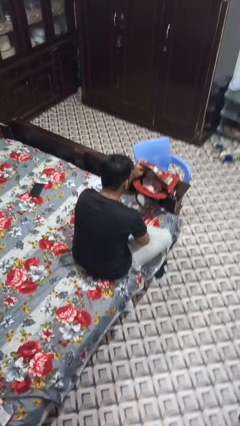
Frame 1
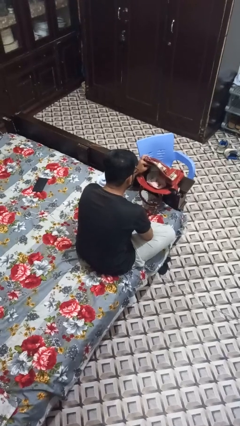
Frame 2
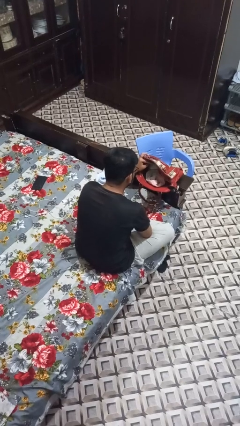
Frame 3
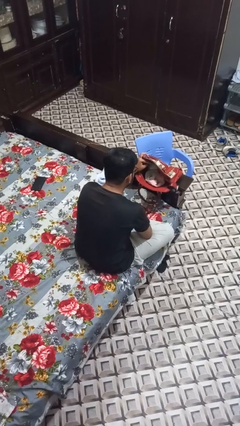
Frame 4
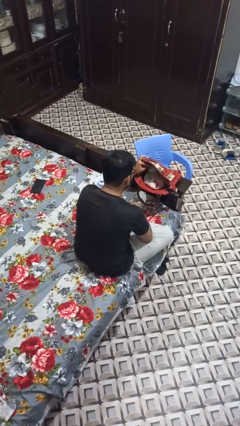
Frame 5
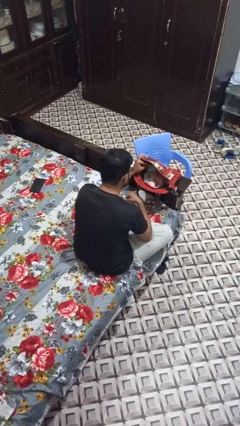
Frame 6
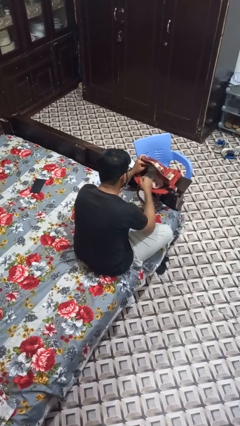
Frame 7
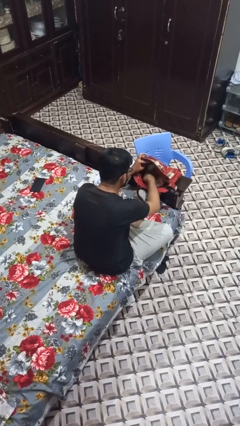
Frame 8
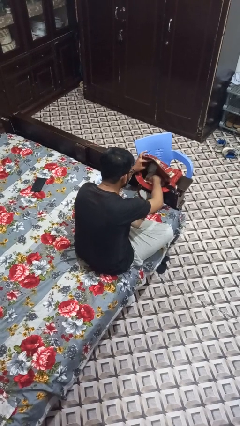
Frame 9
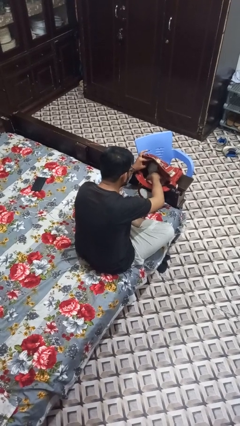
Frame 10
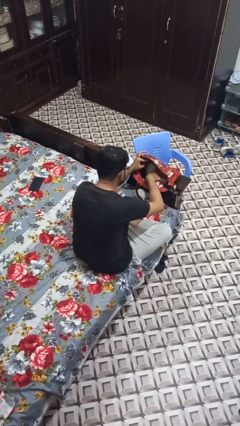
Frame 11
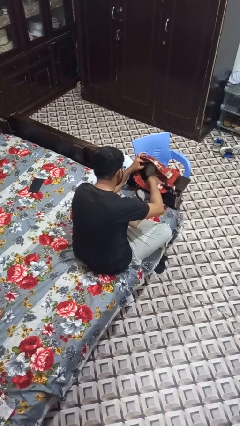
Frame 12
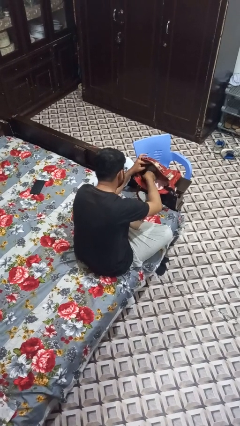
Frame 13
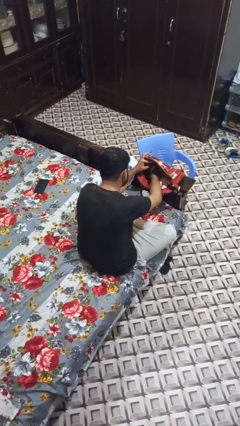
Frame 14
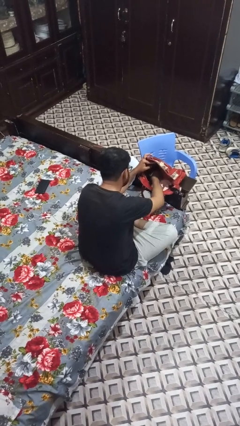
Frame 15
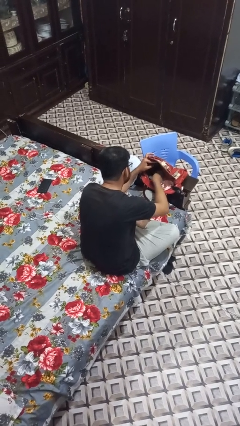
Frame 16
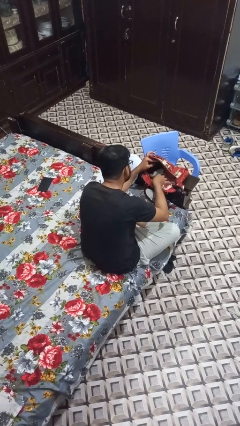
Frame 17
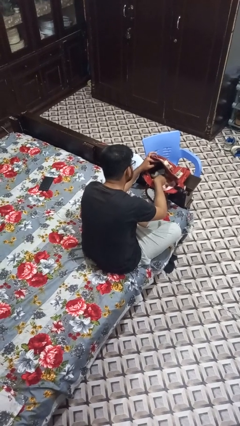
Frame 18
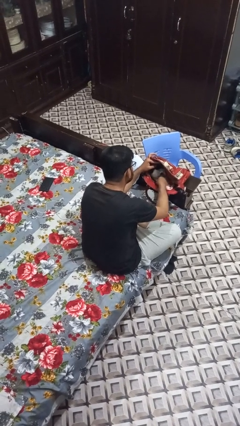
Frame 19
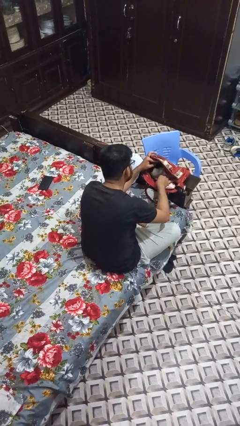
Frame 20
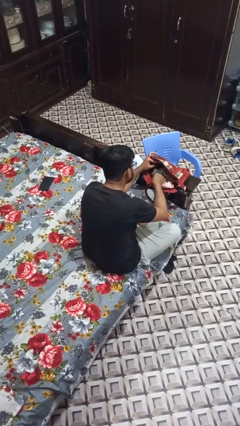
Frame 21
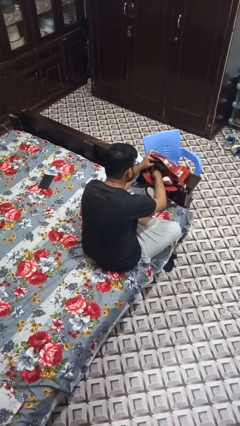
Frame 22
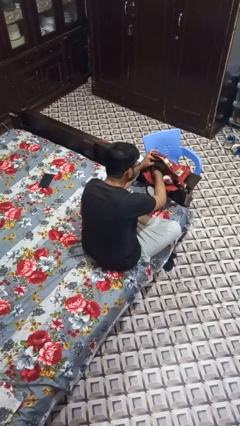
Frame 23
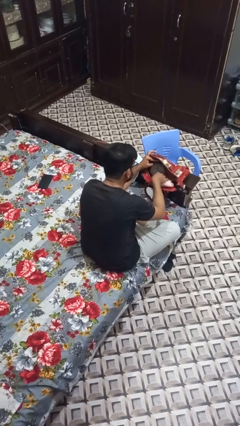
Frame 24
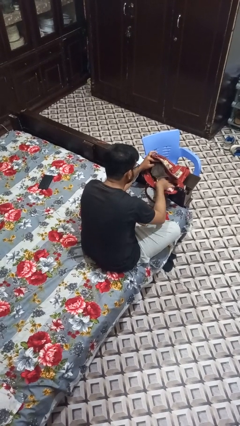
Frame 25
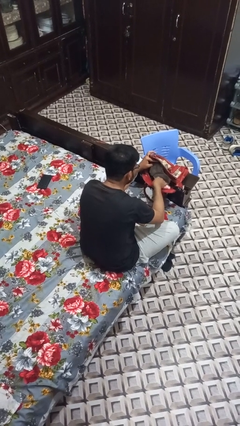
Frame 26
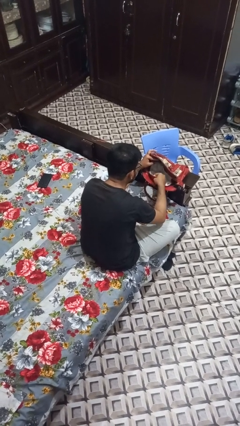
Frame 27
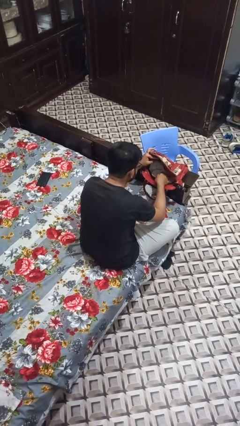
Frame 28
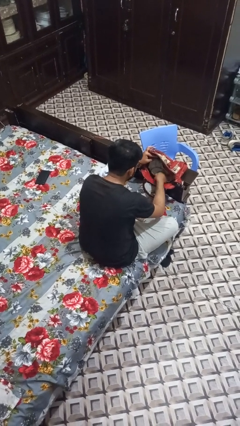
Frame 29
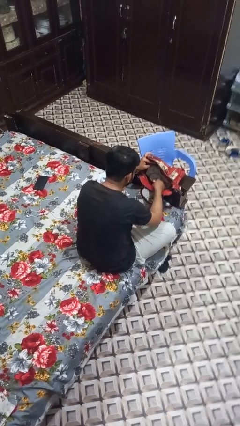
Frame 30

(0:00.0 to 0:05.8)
person searches in purse

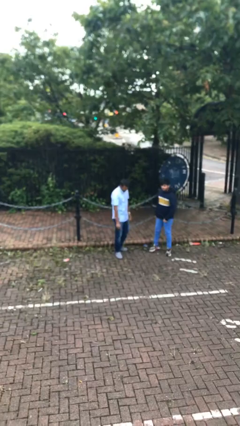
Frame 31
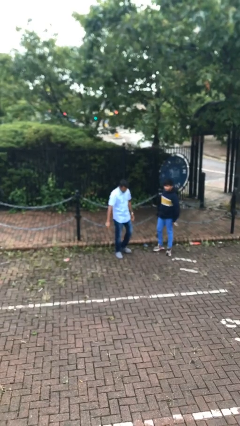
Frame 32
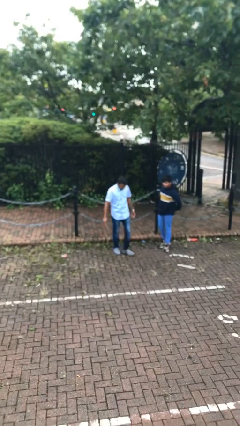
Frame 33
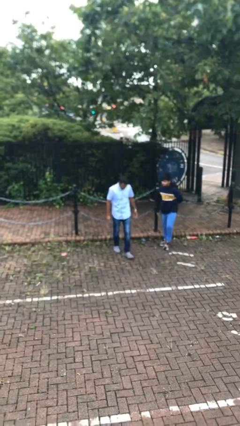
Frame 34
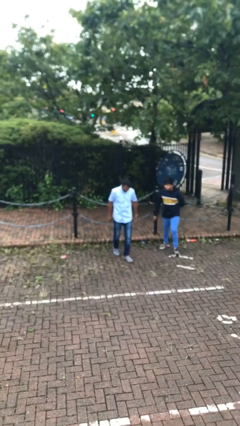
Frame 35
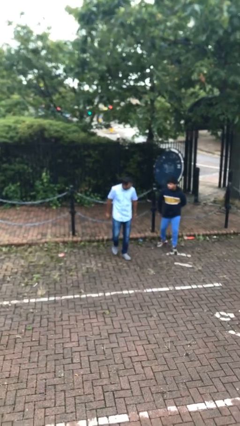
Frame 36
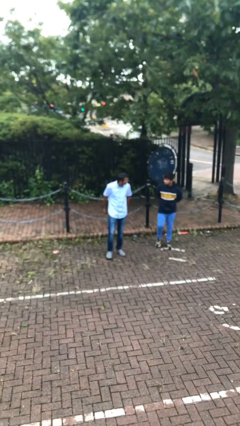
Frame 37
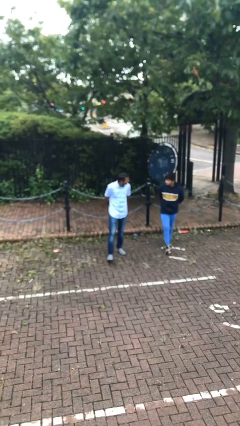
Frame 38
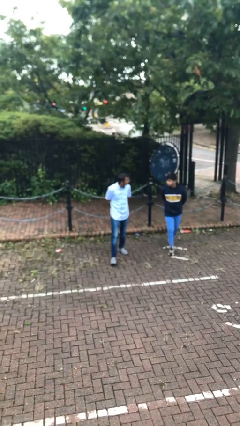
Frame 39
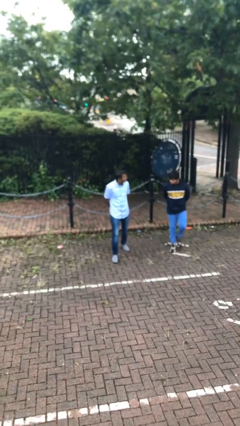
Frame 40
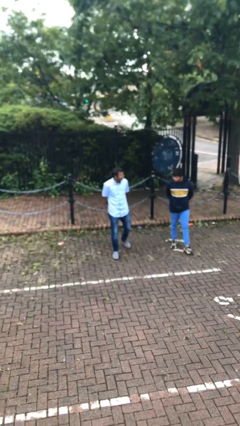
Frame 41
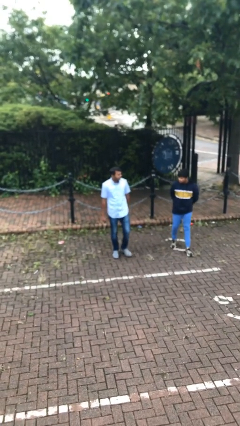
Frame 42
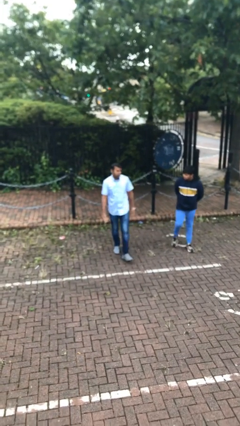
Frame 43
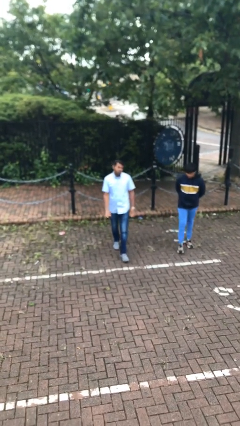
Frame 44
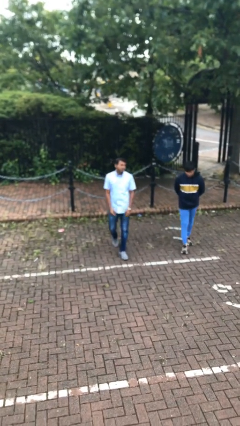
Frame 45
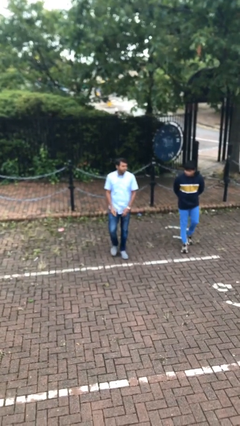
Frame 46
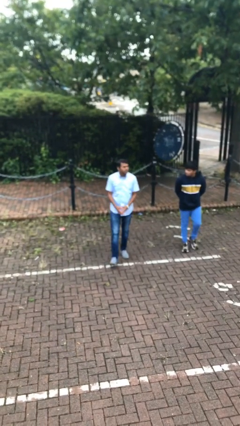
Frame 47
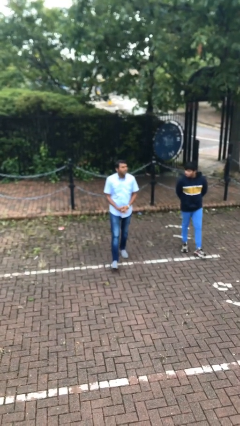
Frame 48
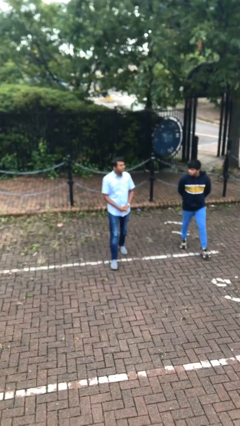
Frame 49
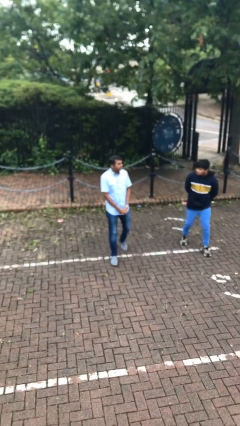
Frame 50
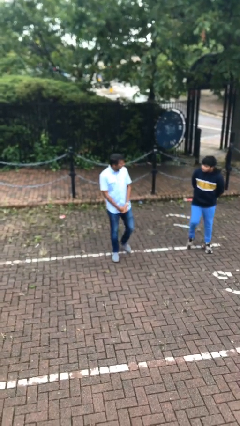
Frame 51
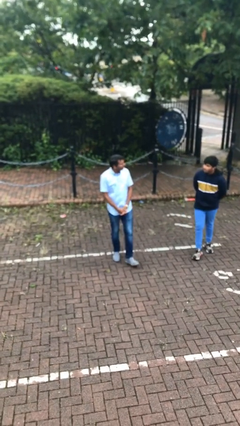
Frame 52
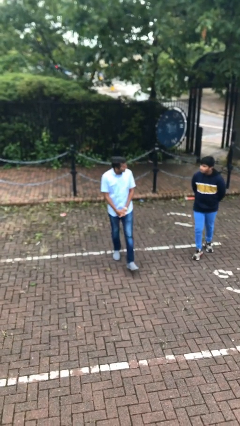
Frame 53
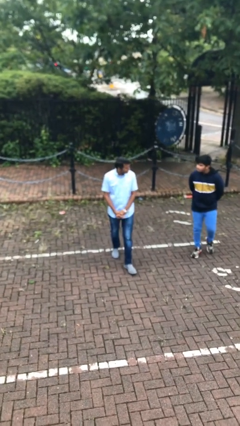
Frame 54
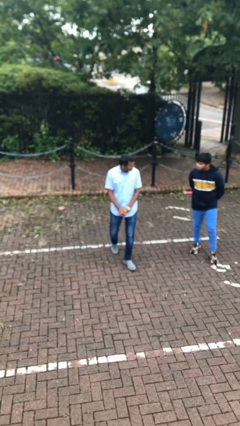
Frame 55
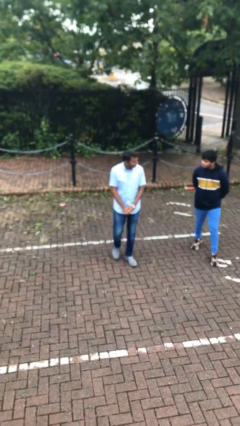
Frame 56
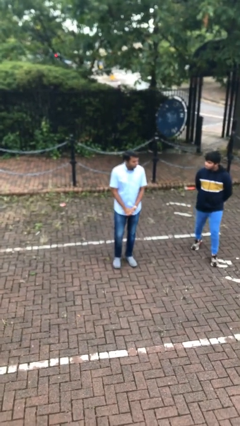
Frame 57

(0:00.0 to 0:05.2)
person talks to person

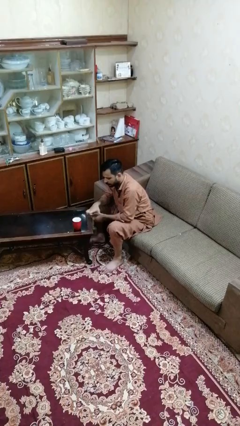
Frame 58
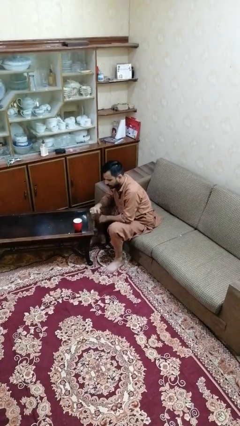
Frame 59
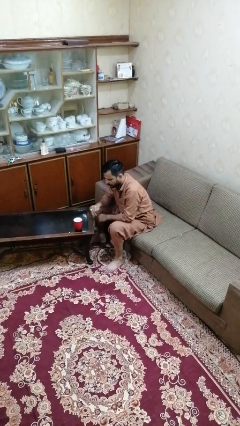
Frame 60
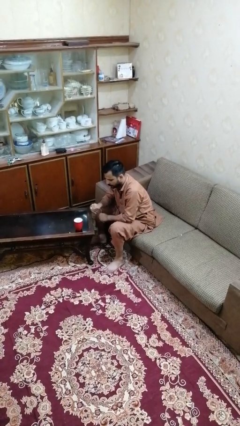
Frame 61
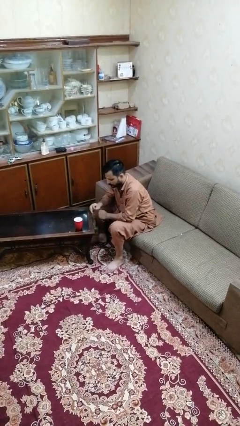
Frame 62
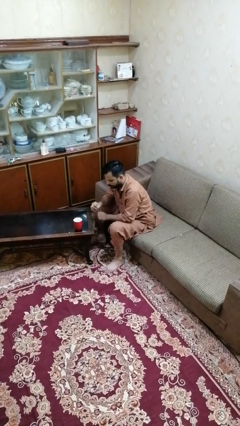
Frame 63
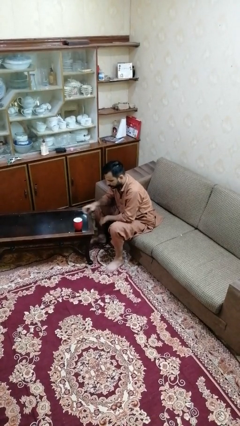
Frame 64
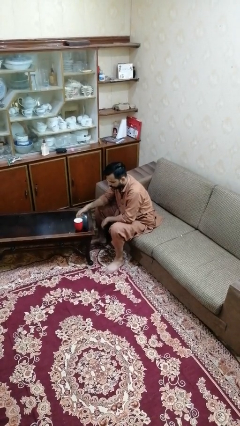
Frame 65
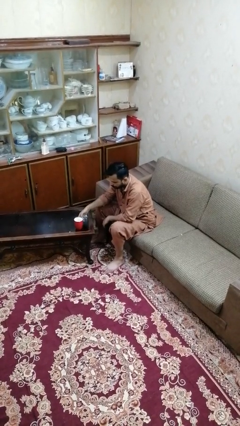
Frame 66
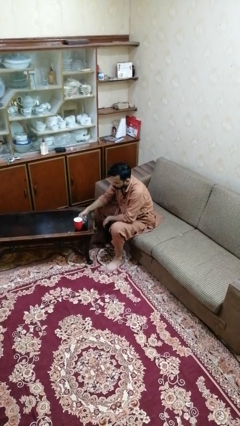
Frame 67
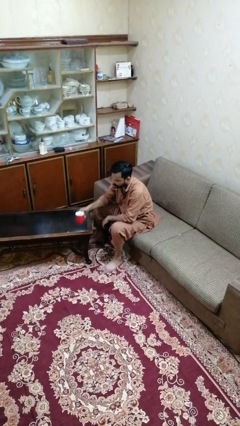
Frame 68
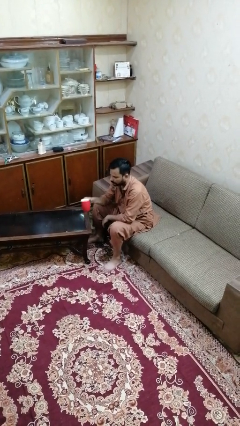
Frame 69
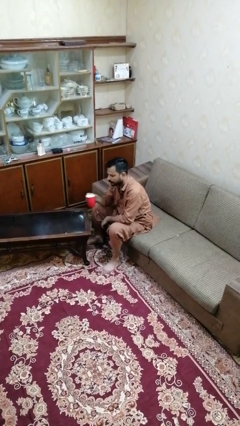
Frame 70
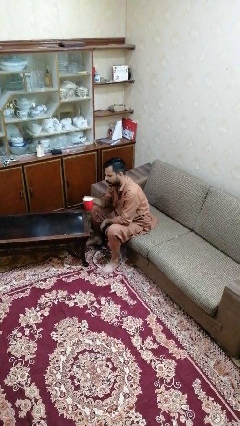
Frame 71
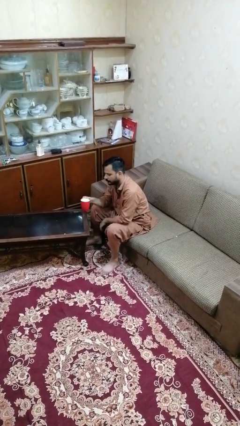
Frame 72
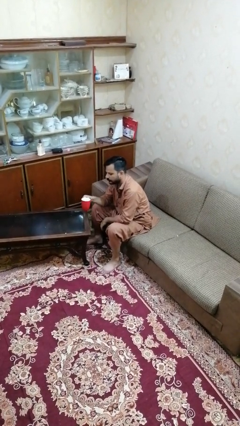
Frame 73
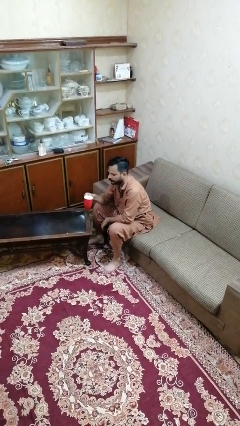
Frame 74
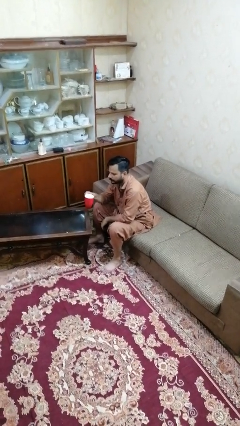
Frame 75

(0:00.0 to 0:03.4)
person picks up object from table

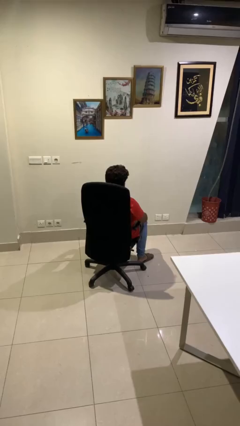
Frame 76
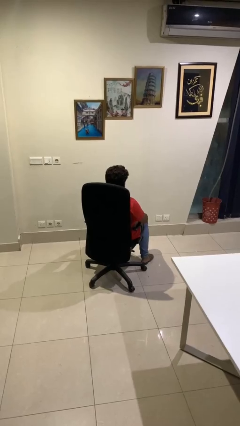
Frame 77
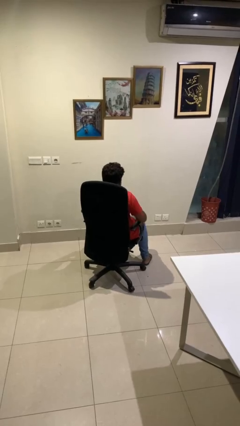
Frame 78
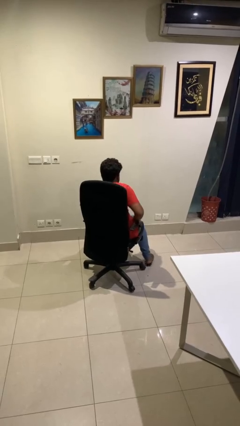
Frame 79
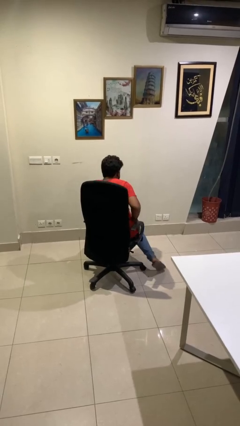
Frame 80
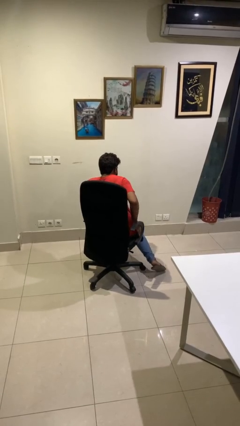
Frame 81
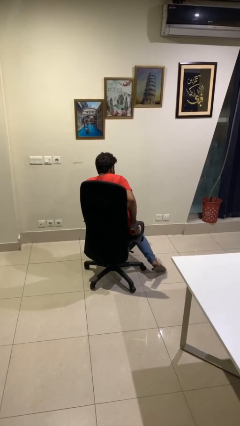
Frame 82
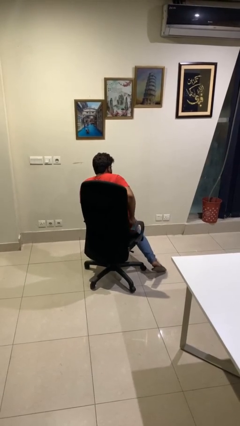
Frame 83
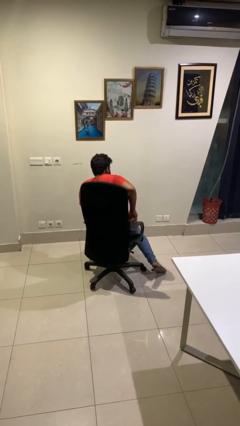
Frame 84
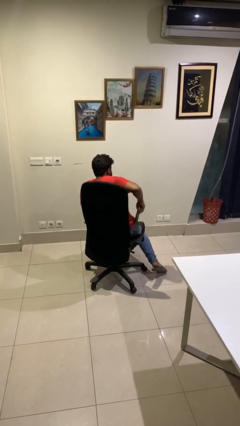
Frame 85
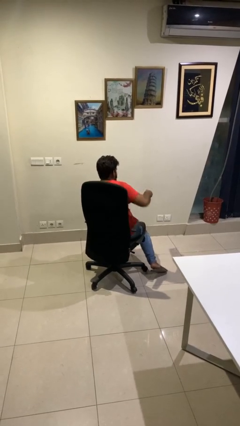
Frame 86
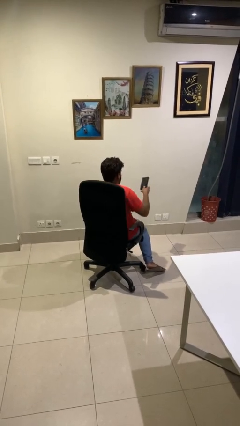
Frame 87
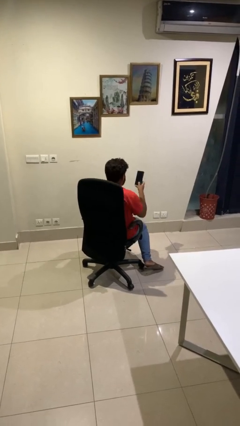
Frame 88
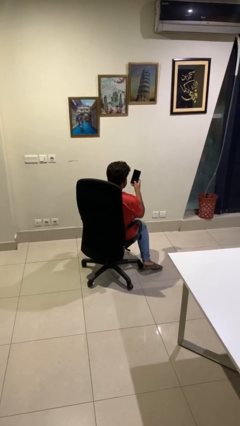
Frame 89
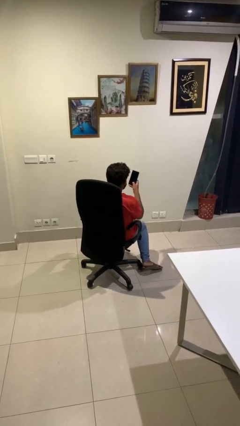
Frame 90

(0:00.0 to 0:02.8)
person takes phone from pocket

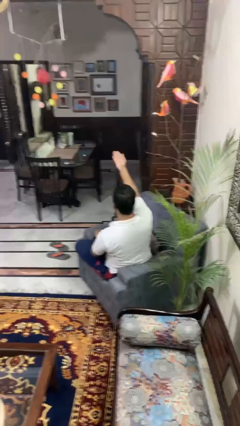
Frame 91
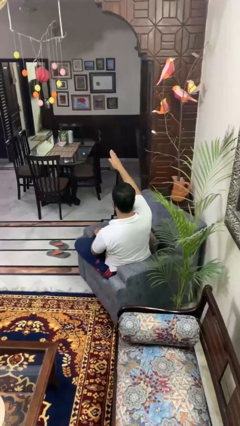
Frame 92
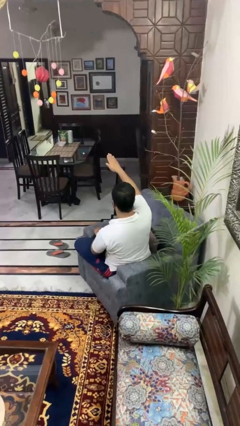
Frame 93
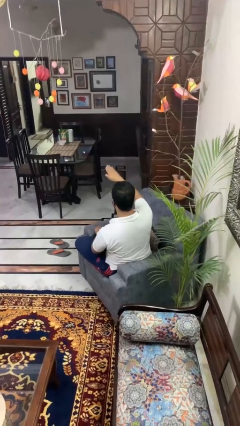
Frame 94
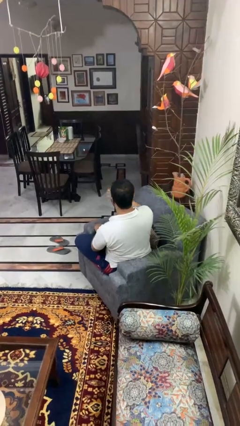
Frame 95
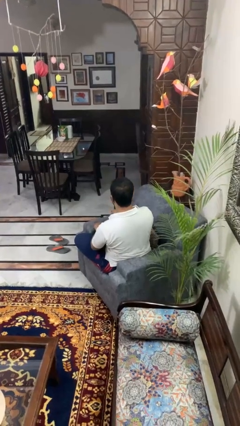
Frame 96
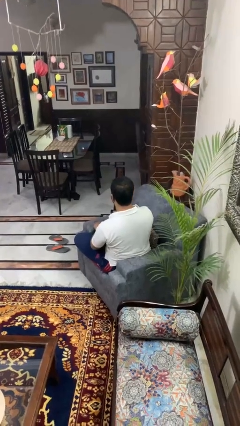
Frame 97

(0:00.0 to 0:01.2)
person gestures swipe down
